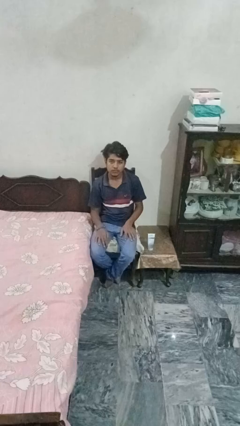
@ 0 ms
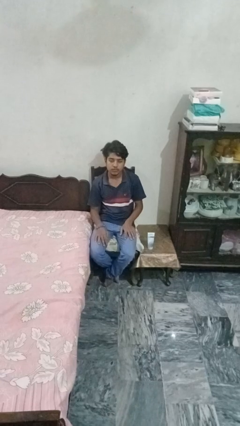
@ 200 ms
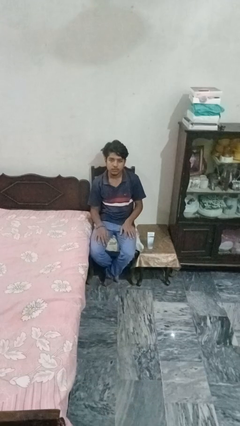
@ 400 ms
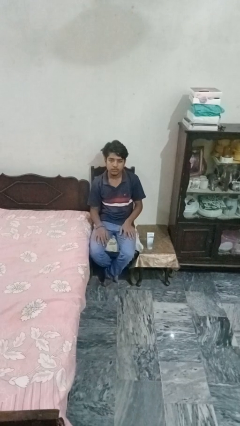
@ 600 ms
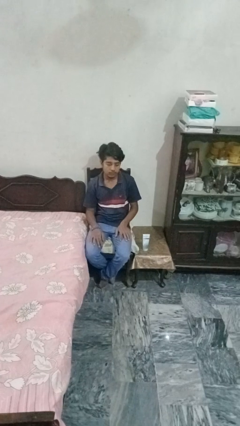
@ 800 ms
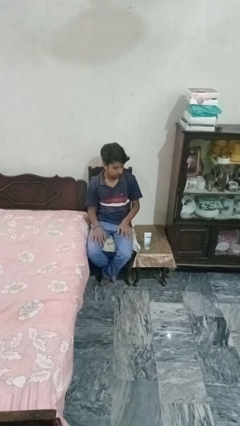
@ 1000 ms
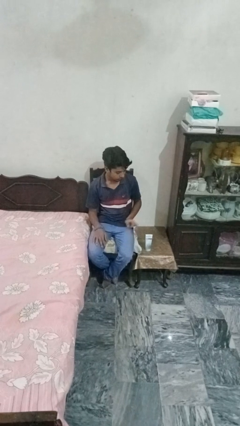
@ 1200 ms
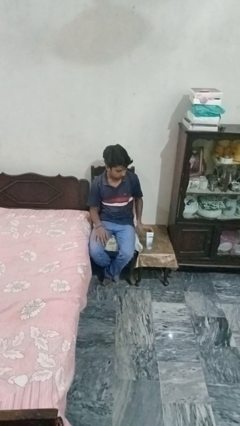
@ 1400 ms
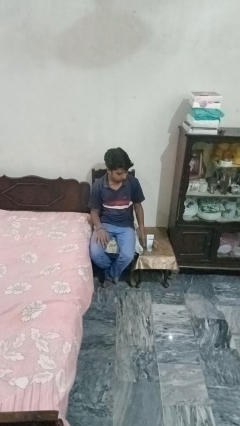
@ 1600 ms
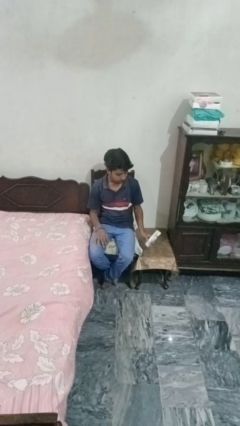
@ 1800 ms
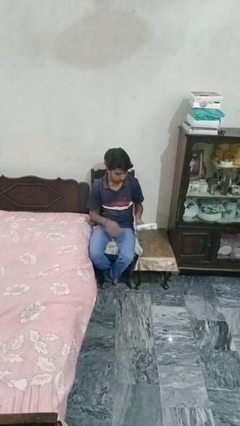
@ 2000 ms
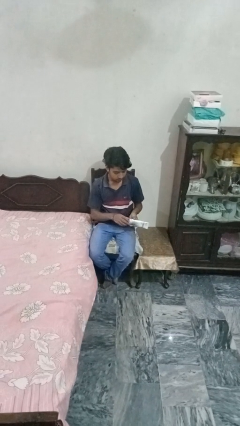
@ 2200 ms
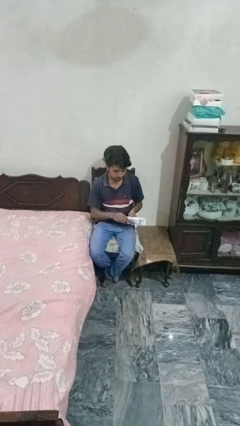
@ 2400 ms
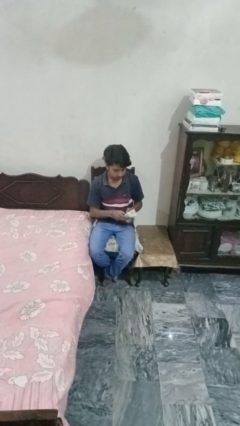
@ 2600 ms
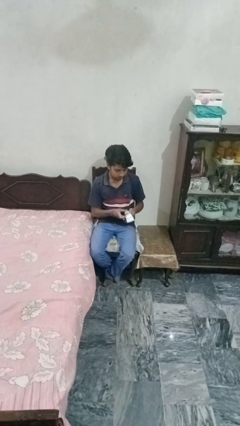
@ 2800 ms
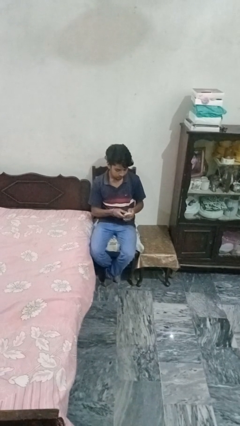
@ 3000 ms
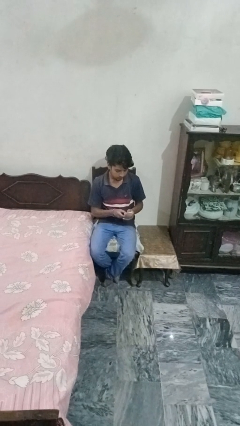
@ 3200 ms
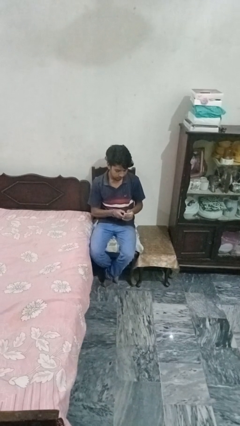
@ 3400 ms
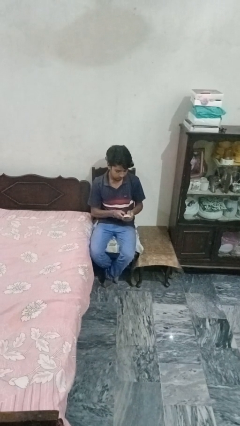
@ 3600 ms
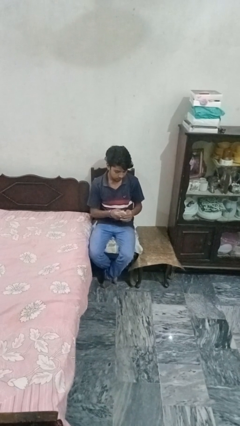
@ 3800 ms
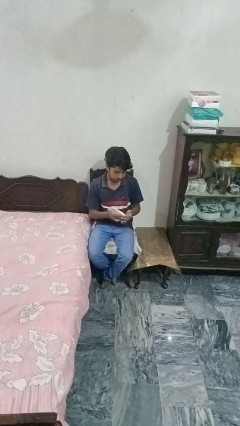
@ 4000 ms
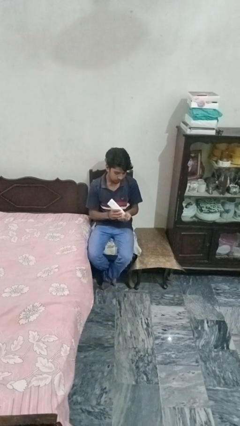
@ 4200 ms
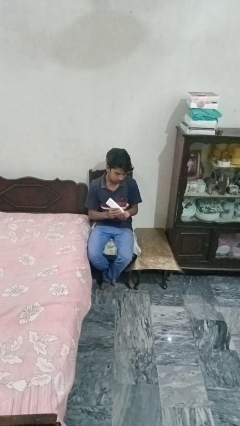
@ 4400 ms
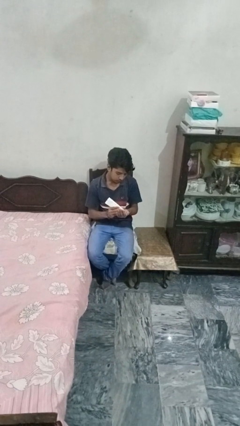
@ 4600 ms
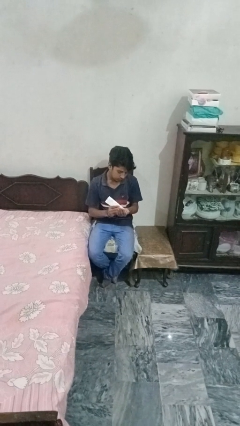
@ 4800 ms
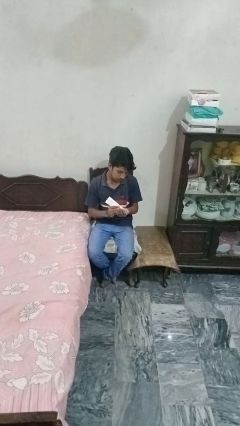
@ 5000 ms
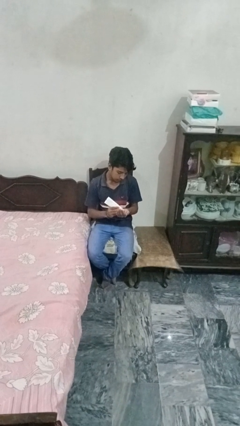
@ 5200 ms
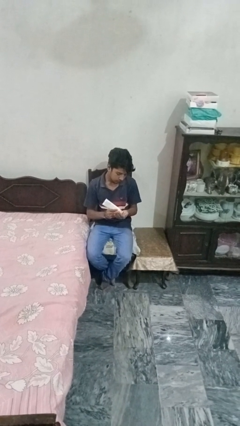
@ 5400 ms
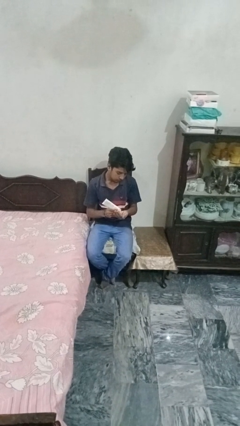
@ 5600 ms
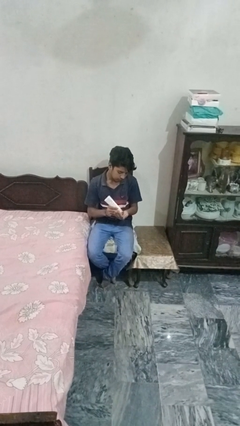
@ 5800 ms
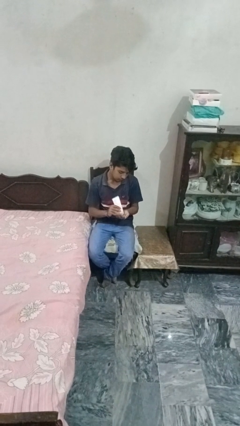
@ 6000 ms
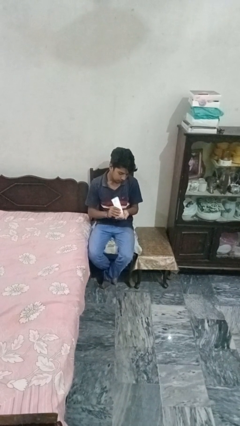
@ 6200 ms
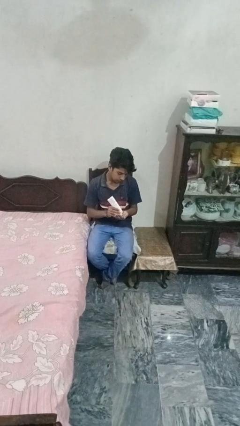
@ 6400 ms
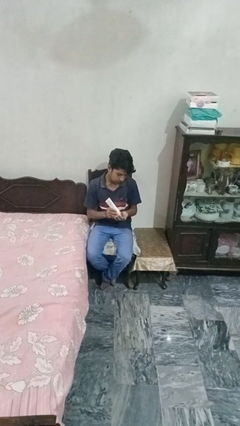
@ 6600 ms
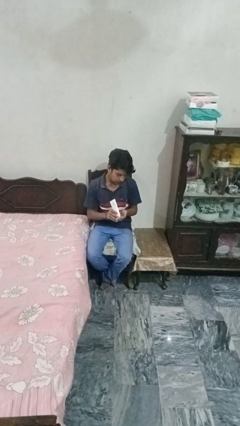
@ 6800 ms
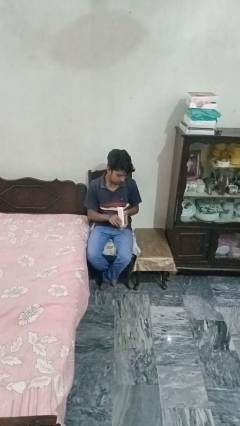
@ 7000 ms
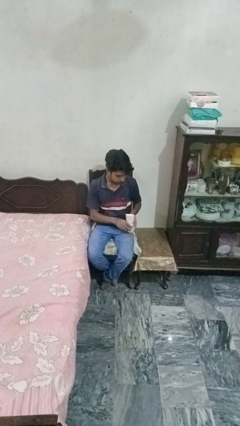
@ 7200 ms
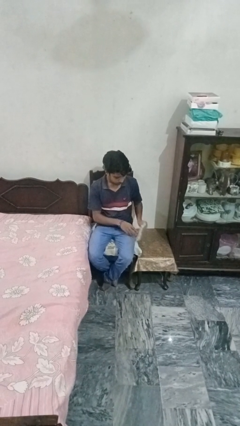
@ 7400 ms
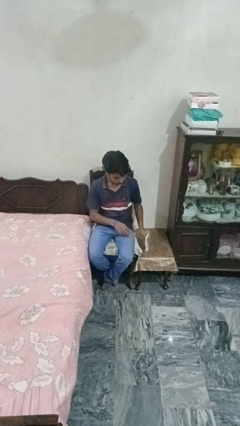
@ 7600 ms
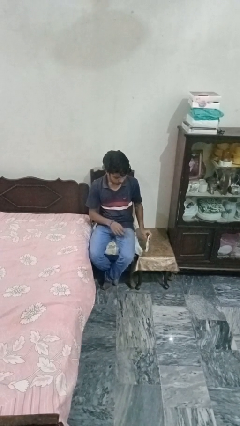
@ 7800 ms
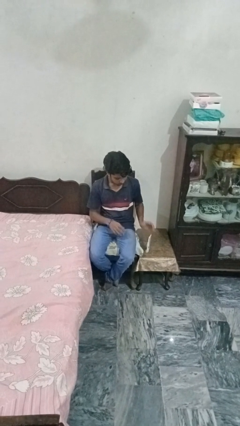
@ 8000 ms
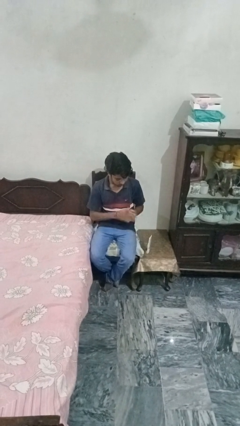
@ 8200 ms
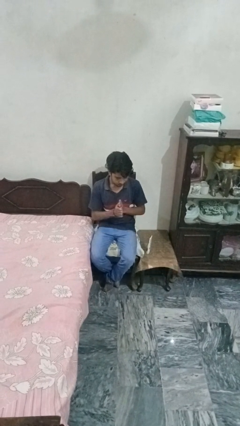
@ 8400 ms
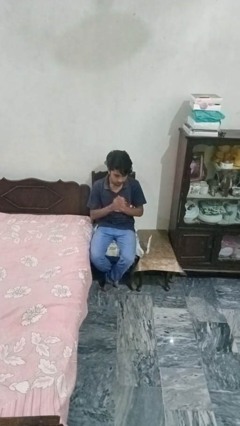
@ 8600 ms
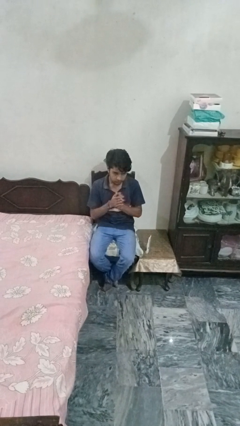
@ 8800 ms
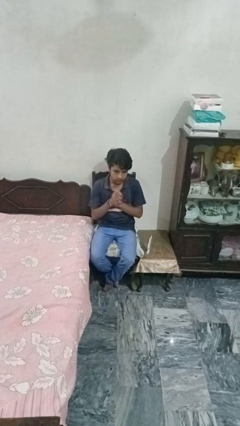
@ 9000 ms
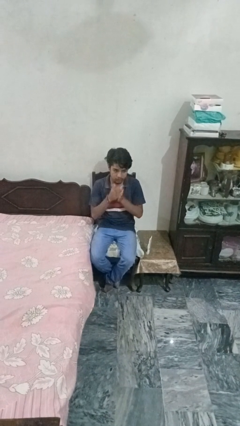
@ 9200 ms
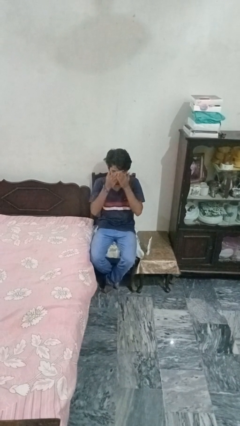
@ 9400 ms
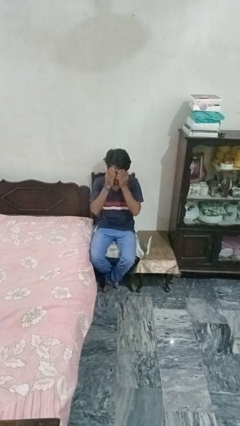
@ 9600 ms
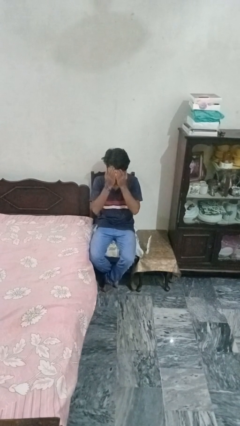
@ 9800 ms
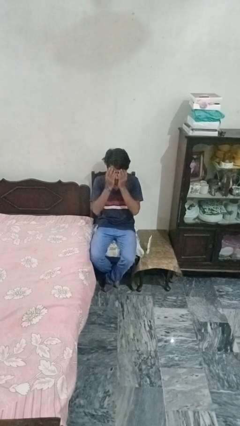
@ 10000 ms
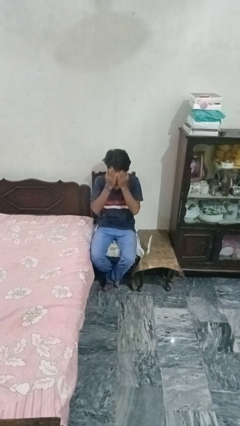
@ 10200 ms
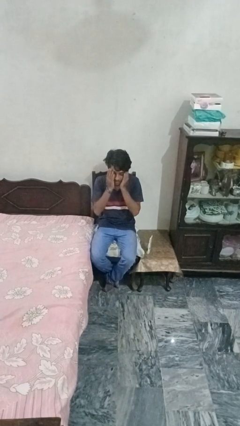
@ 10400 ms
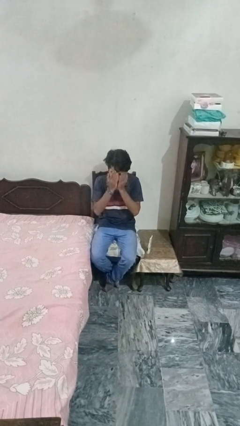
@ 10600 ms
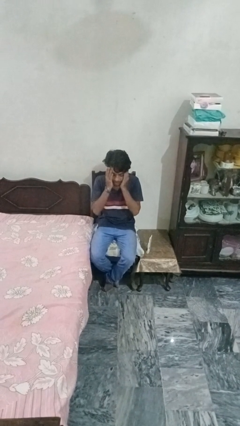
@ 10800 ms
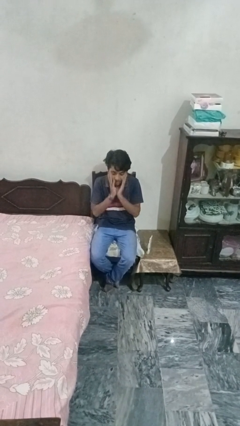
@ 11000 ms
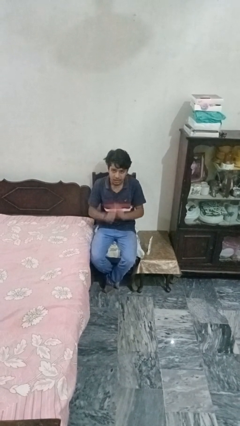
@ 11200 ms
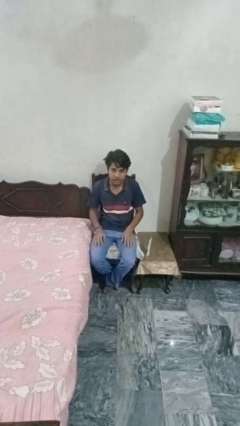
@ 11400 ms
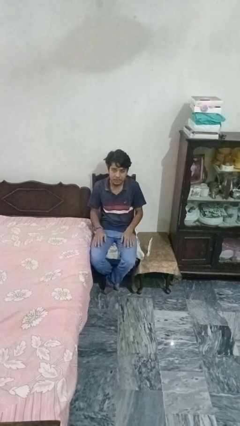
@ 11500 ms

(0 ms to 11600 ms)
person applies facial moisturizer

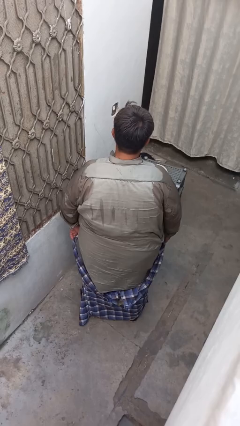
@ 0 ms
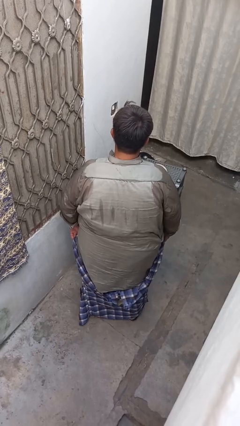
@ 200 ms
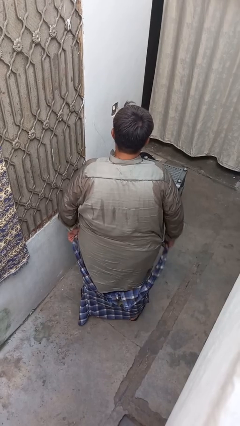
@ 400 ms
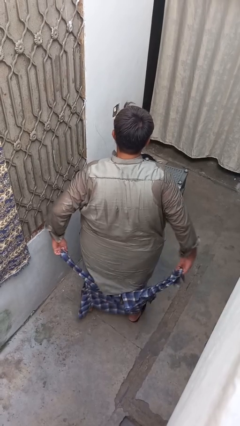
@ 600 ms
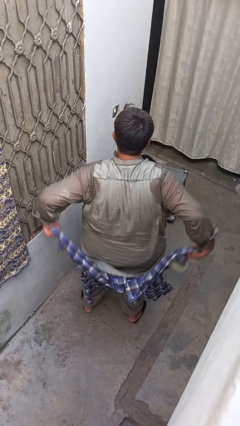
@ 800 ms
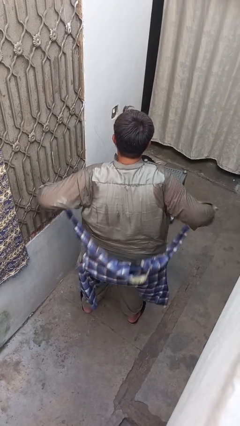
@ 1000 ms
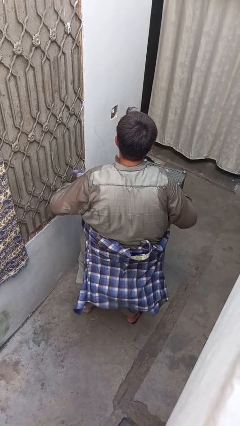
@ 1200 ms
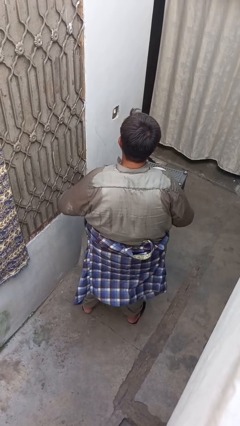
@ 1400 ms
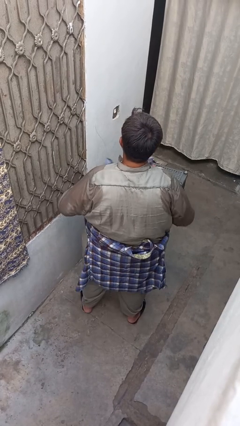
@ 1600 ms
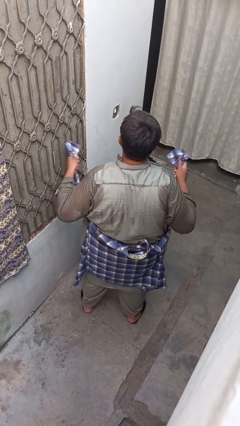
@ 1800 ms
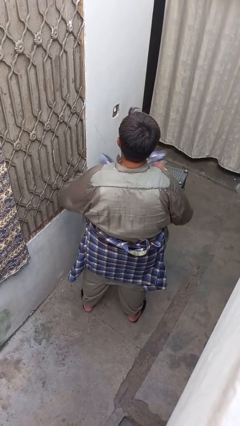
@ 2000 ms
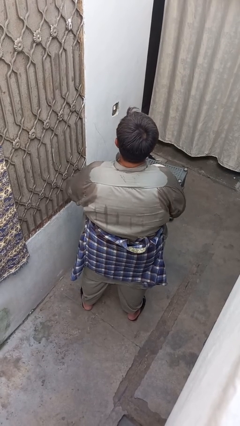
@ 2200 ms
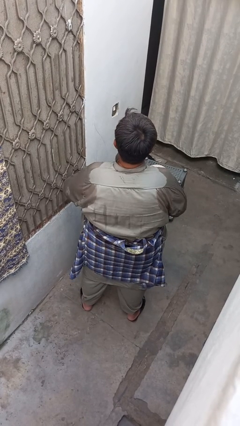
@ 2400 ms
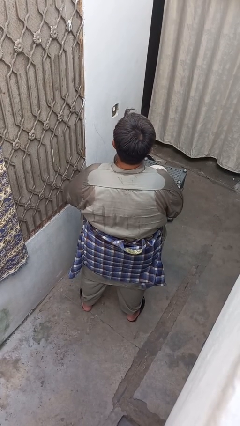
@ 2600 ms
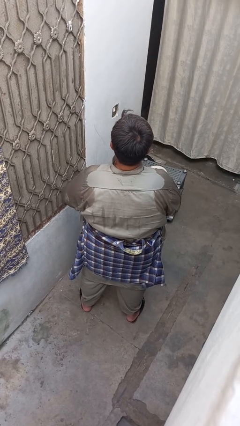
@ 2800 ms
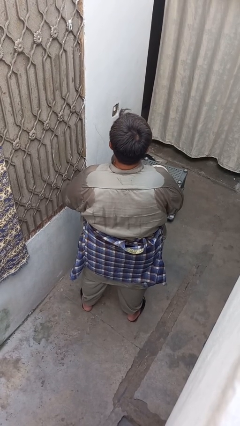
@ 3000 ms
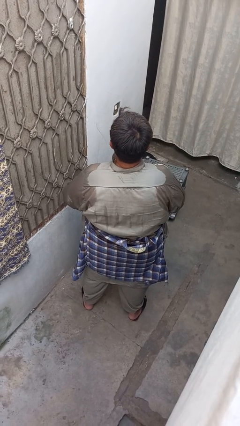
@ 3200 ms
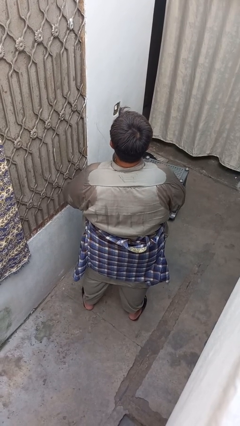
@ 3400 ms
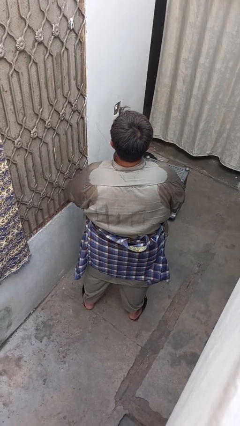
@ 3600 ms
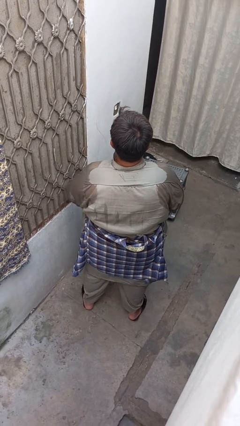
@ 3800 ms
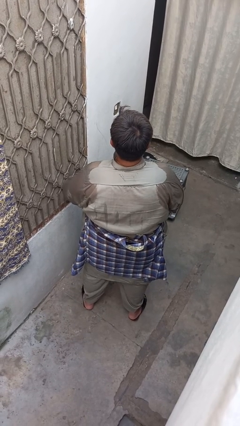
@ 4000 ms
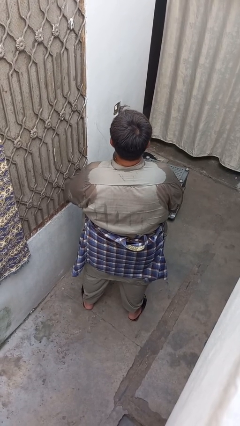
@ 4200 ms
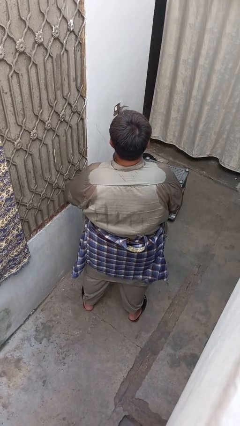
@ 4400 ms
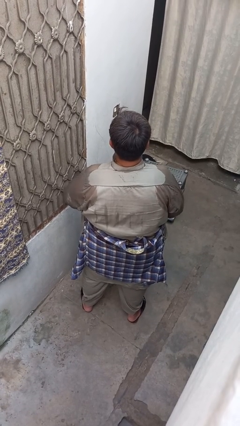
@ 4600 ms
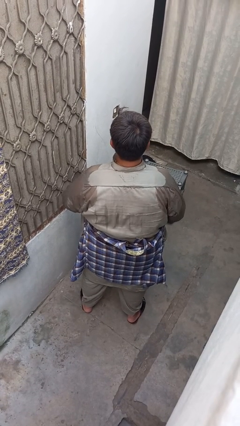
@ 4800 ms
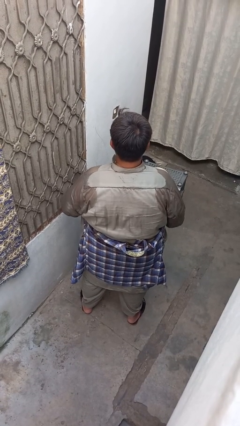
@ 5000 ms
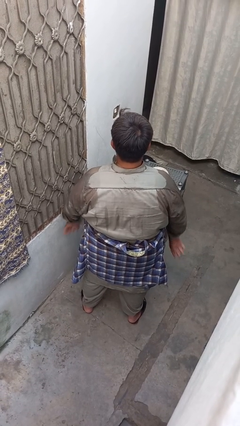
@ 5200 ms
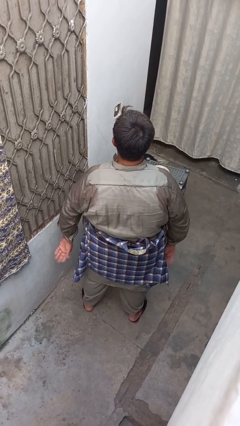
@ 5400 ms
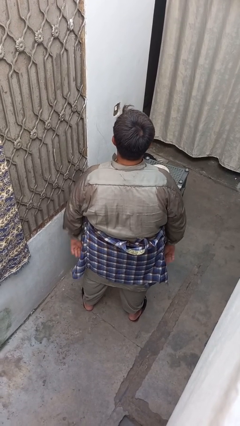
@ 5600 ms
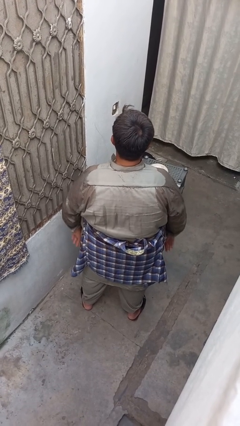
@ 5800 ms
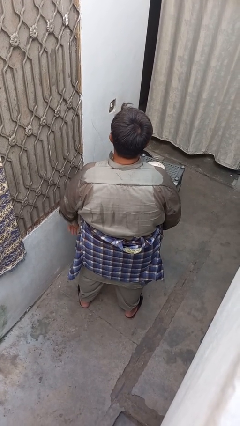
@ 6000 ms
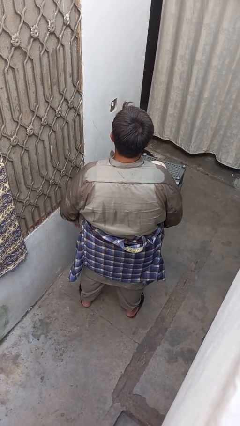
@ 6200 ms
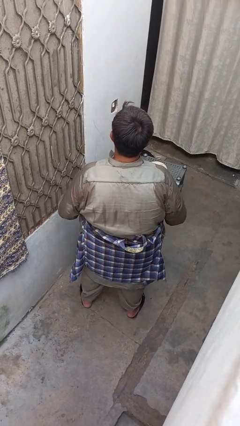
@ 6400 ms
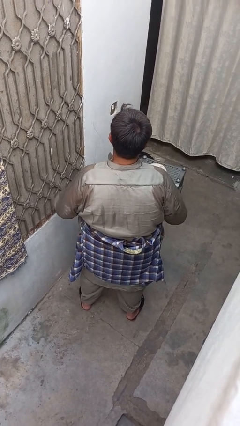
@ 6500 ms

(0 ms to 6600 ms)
person ties jacket around waist
